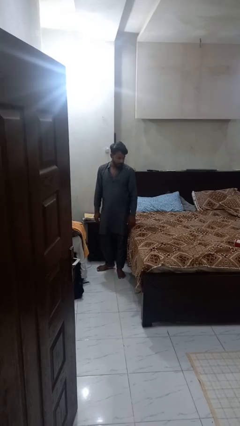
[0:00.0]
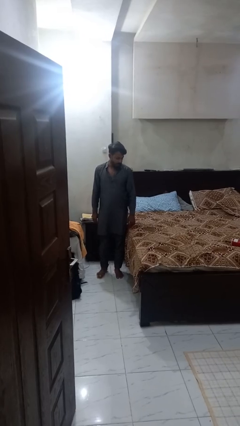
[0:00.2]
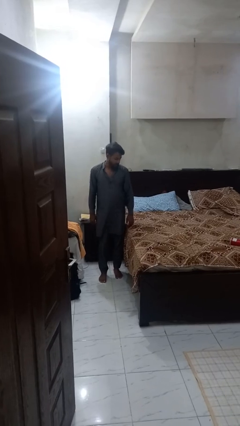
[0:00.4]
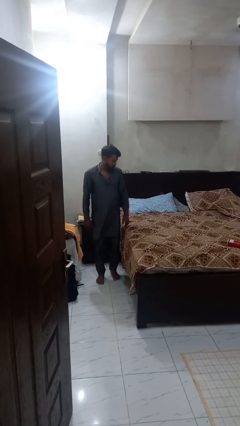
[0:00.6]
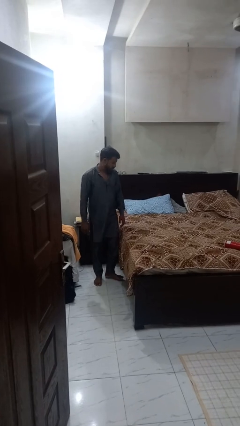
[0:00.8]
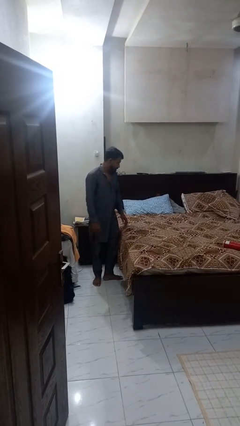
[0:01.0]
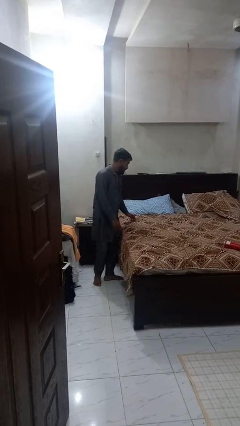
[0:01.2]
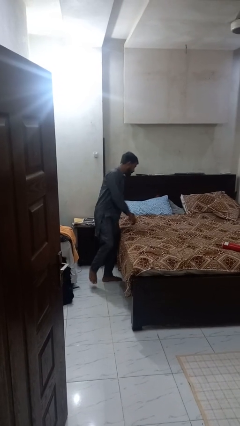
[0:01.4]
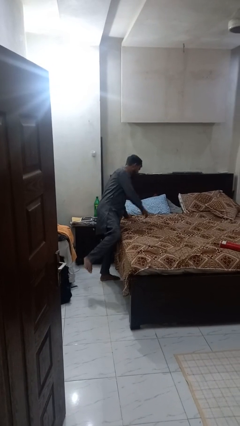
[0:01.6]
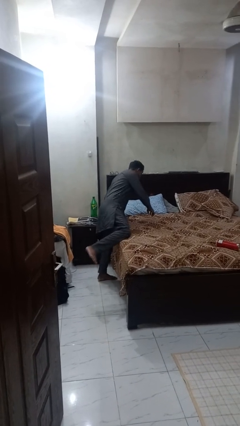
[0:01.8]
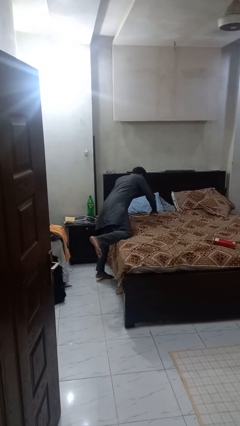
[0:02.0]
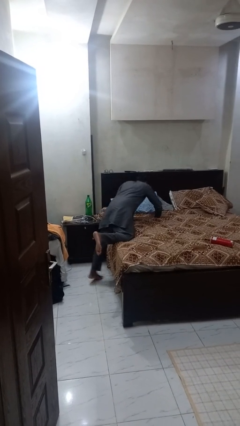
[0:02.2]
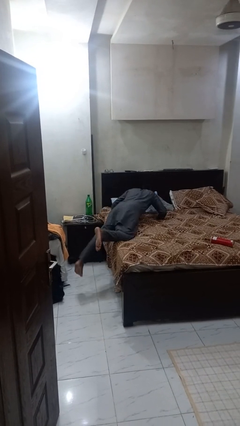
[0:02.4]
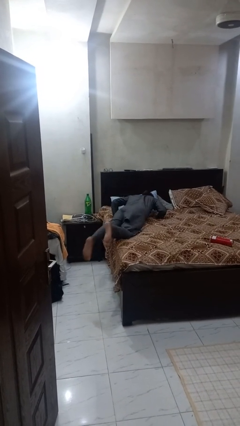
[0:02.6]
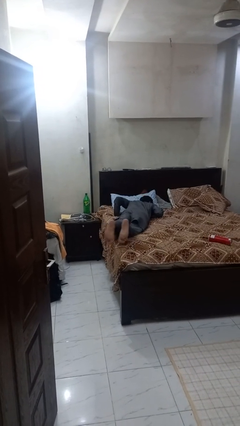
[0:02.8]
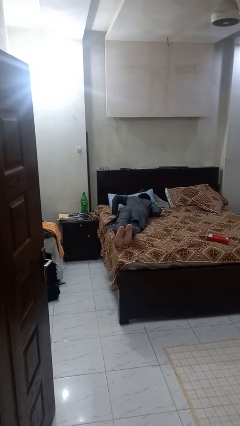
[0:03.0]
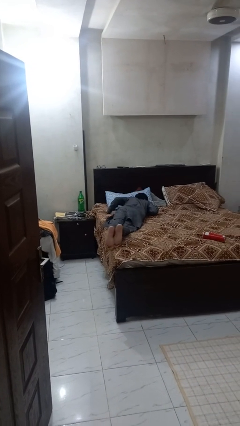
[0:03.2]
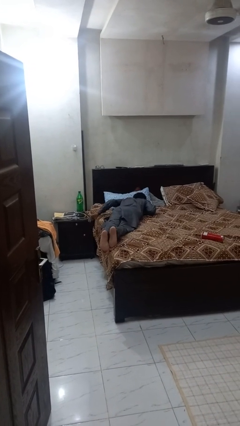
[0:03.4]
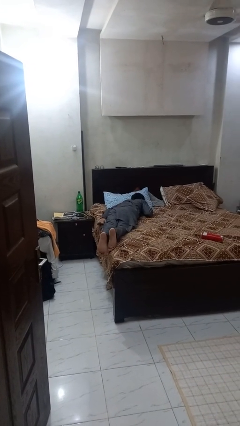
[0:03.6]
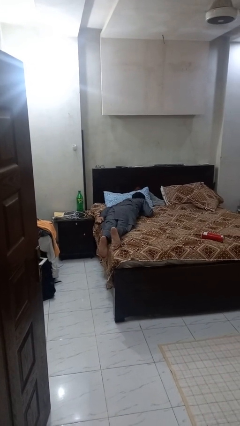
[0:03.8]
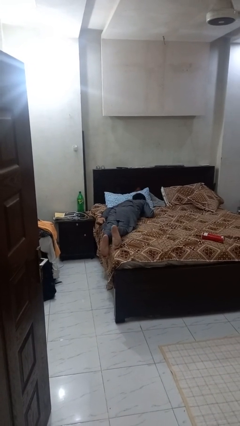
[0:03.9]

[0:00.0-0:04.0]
person lies down on bed

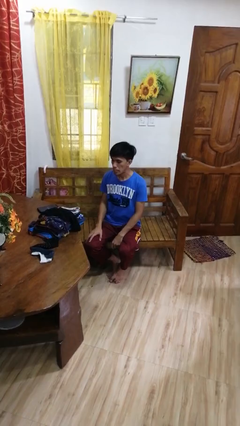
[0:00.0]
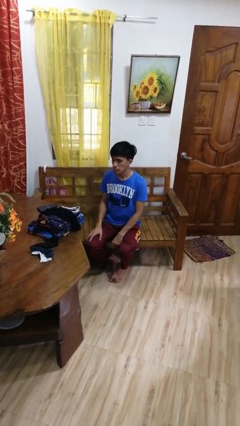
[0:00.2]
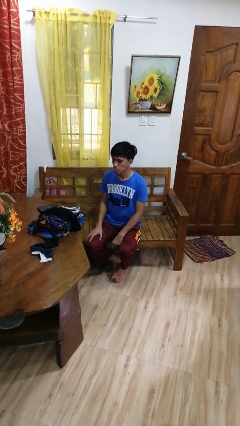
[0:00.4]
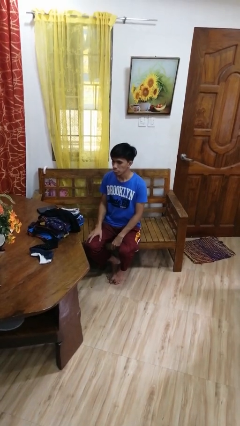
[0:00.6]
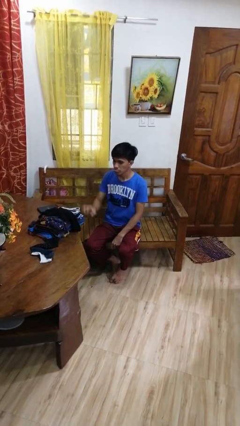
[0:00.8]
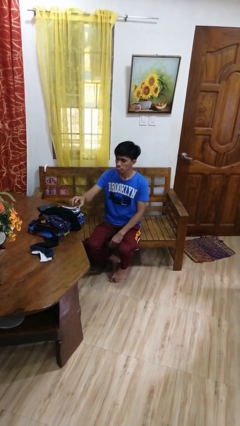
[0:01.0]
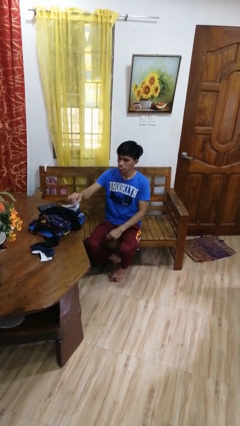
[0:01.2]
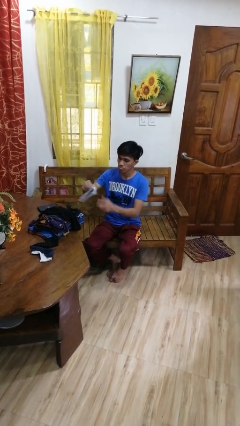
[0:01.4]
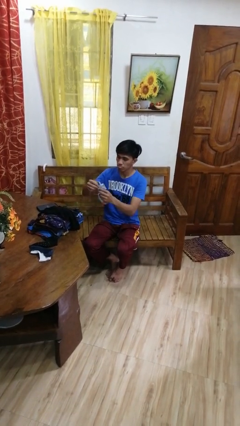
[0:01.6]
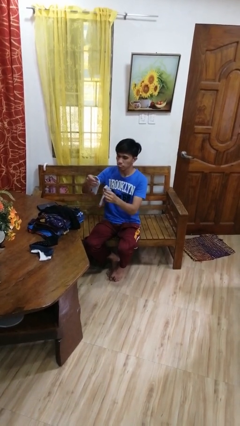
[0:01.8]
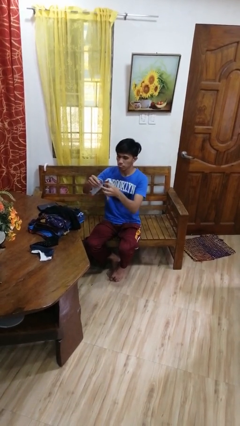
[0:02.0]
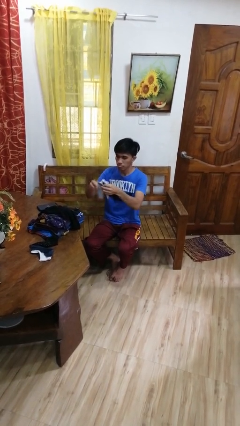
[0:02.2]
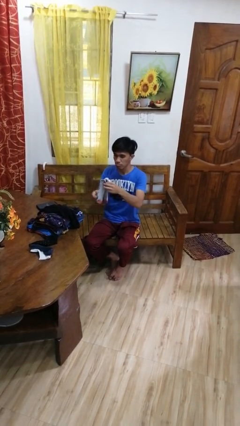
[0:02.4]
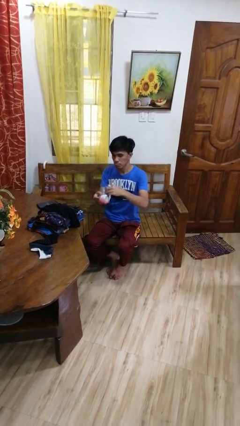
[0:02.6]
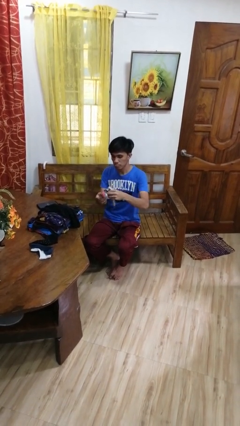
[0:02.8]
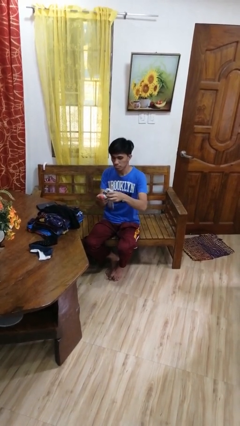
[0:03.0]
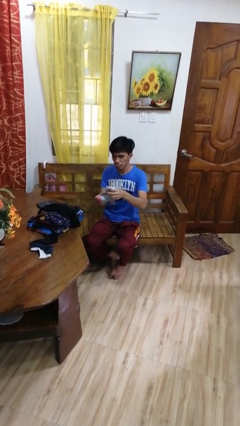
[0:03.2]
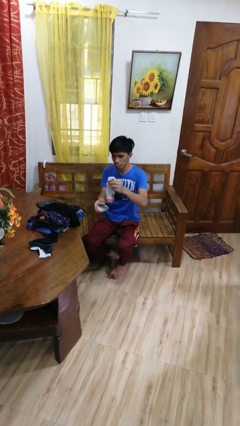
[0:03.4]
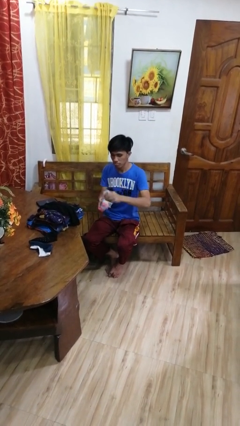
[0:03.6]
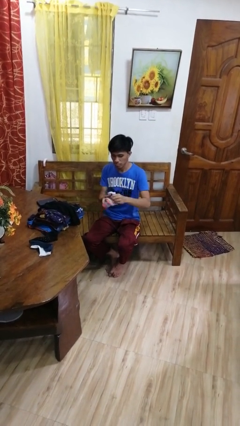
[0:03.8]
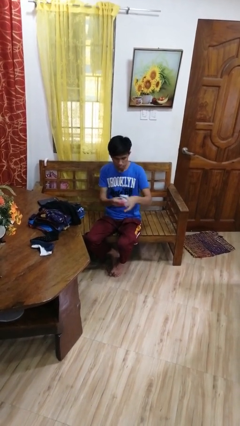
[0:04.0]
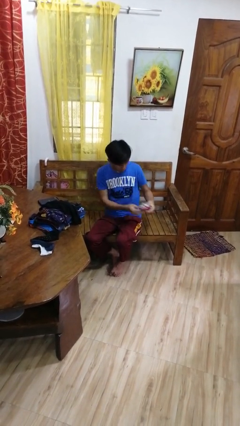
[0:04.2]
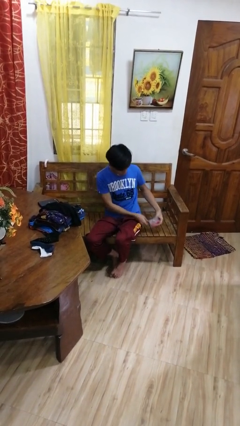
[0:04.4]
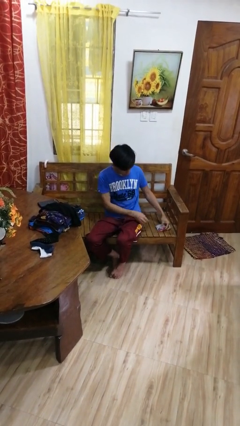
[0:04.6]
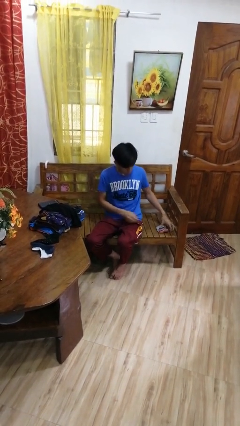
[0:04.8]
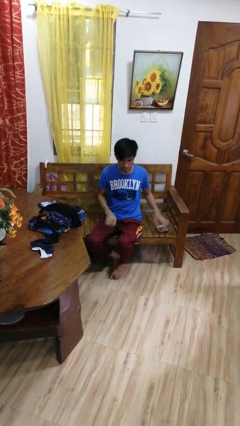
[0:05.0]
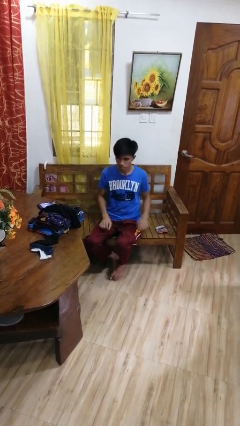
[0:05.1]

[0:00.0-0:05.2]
person folds socks

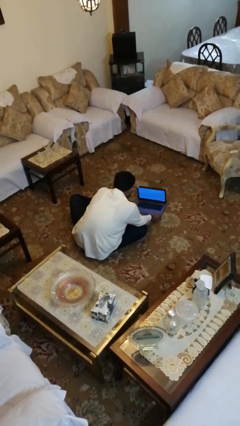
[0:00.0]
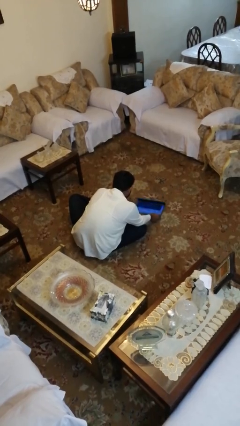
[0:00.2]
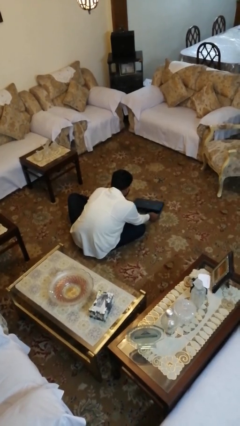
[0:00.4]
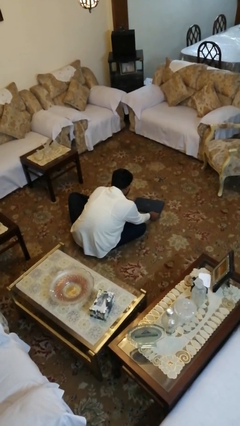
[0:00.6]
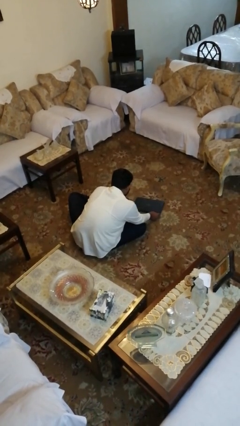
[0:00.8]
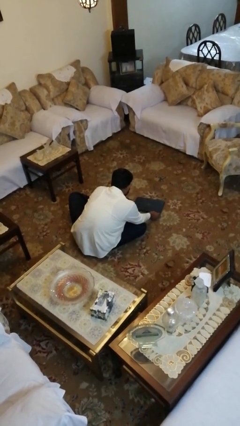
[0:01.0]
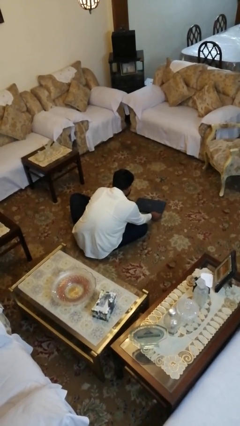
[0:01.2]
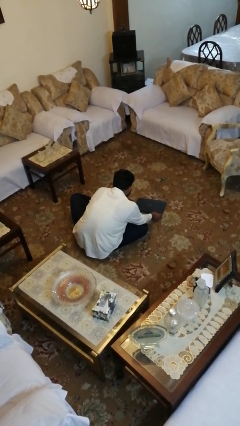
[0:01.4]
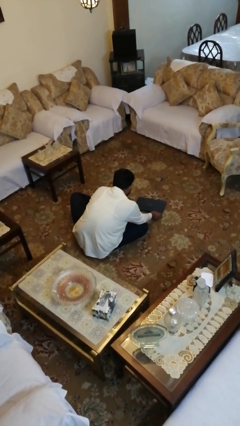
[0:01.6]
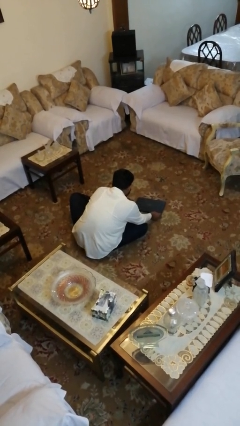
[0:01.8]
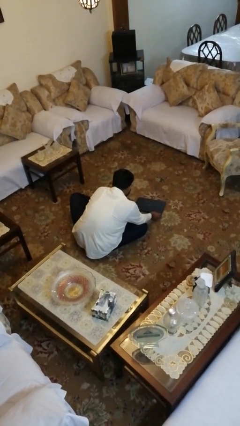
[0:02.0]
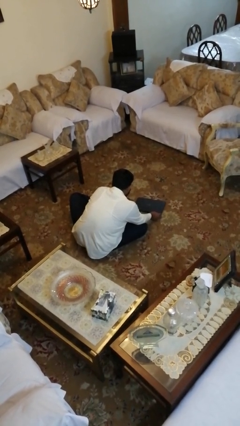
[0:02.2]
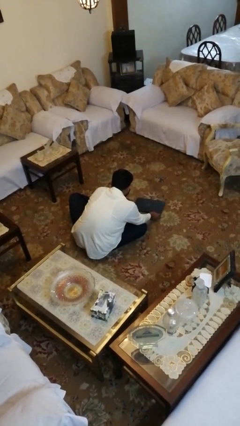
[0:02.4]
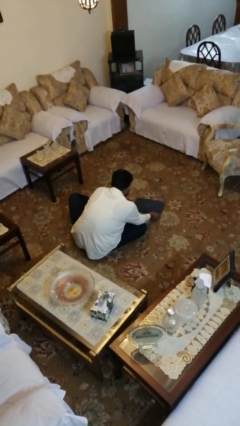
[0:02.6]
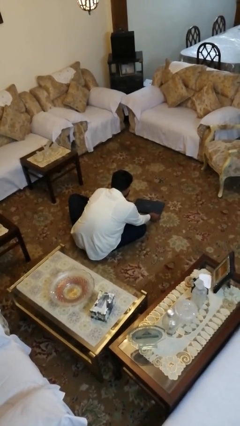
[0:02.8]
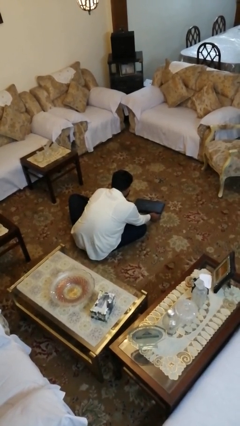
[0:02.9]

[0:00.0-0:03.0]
person closes laptop

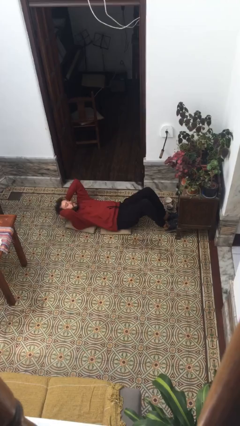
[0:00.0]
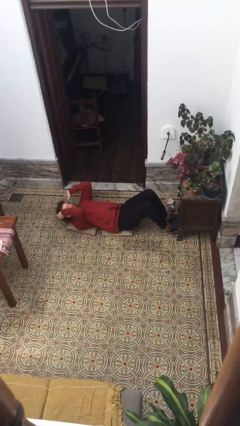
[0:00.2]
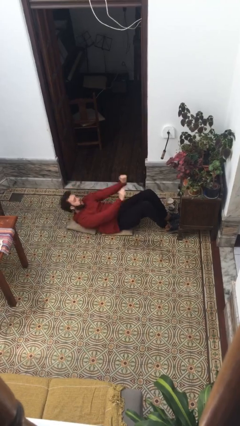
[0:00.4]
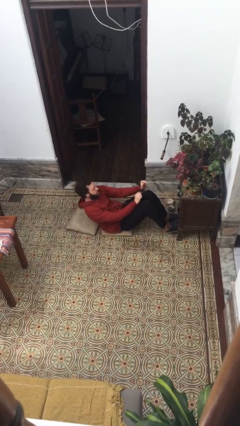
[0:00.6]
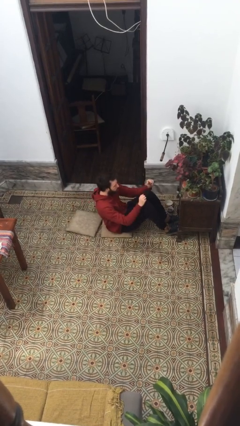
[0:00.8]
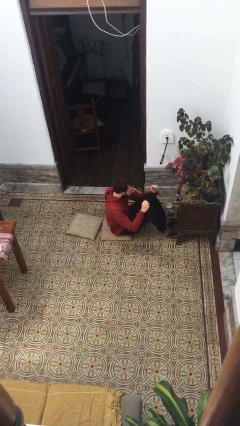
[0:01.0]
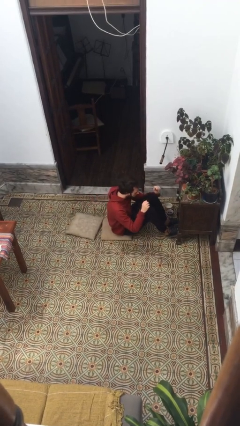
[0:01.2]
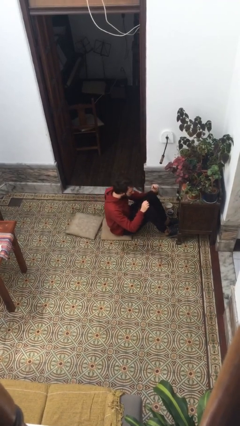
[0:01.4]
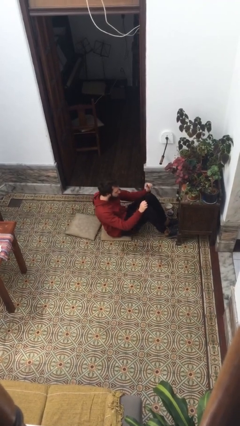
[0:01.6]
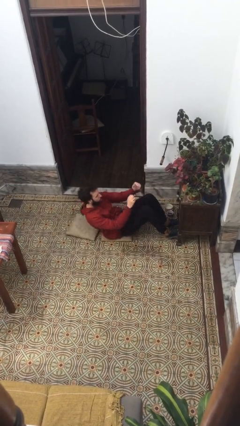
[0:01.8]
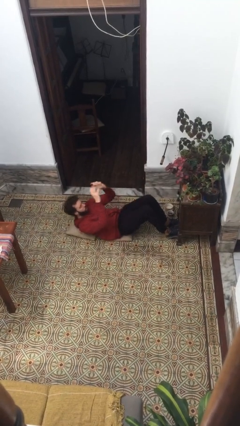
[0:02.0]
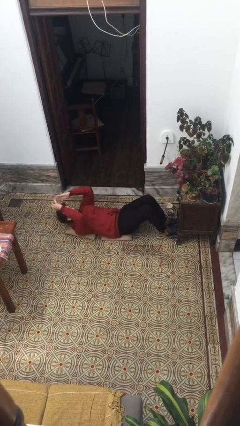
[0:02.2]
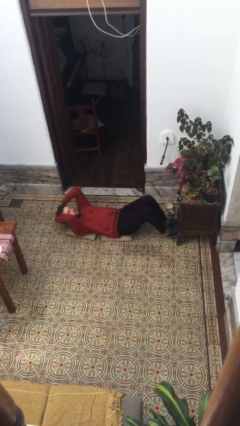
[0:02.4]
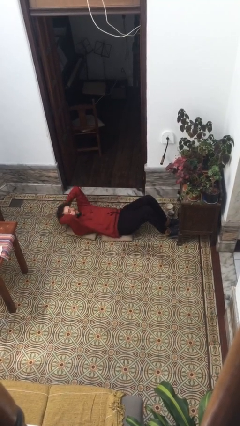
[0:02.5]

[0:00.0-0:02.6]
person exercises with situp

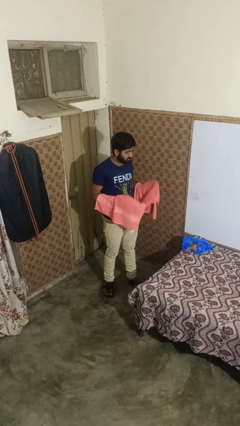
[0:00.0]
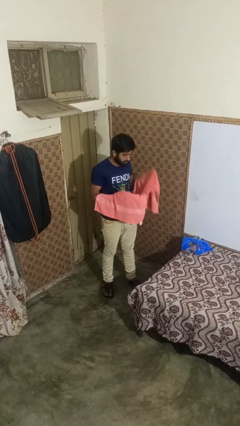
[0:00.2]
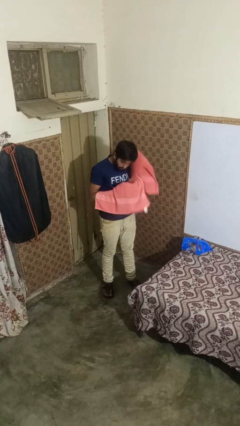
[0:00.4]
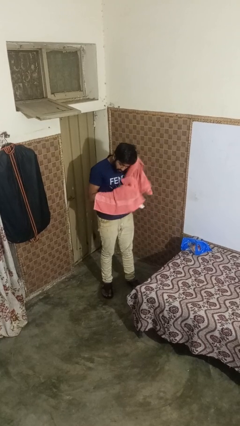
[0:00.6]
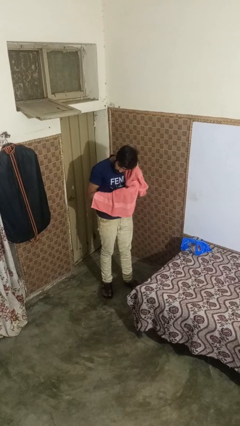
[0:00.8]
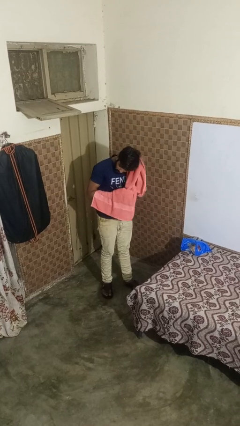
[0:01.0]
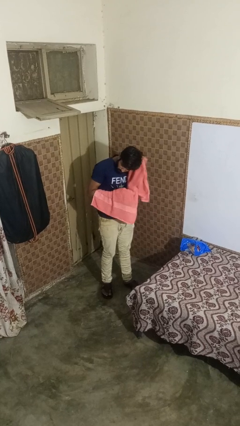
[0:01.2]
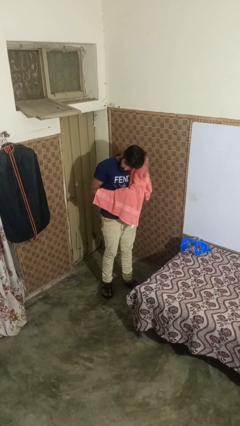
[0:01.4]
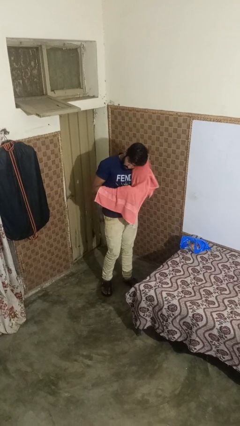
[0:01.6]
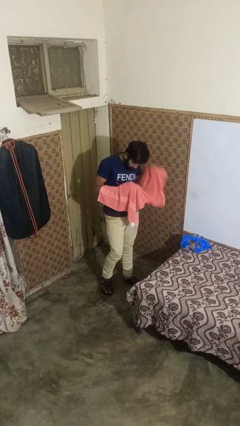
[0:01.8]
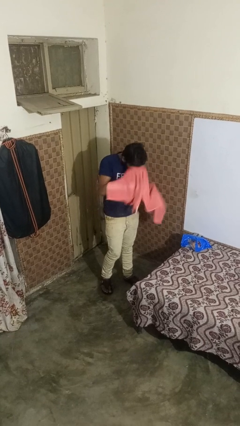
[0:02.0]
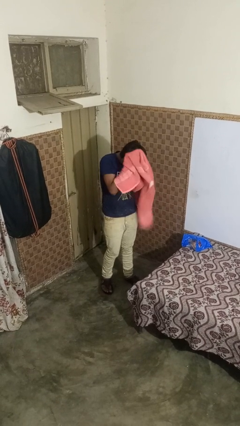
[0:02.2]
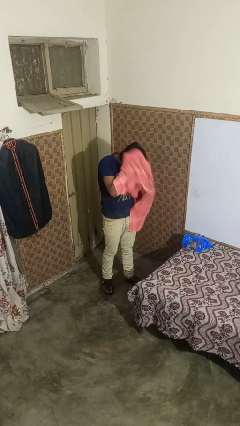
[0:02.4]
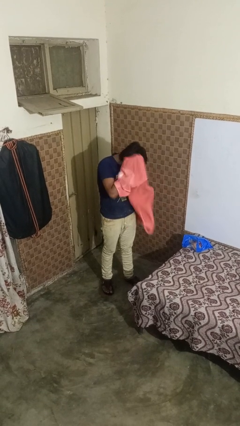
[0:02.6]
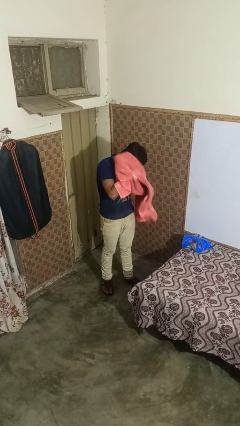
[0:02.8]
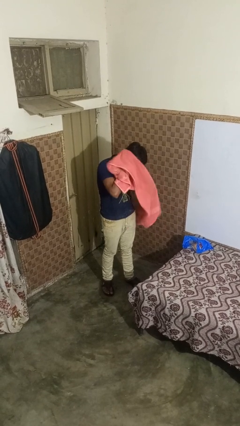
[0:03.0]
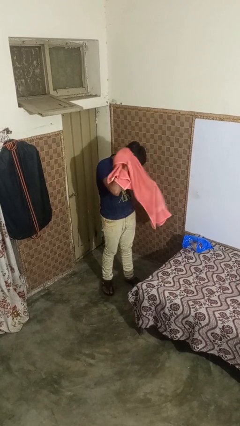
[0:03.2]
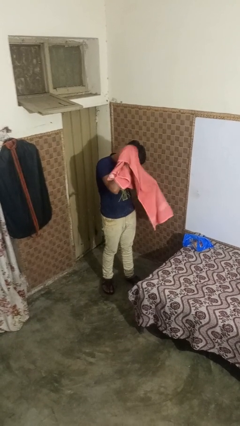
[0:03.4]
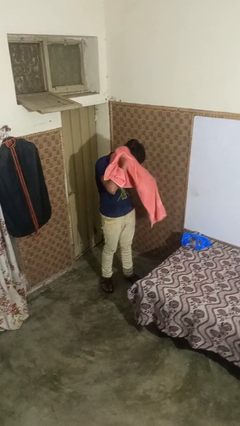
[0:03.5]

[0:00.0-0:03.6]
person dries hair with towel
